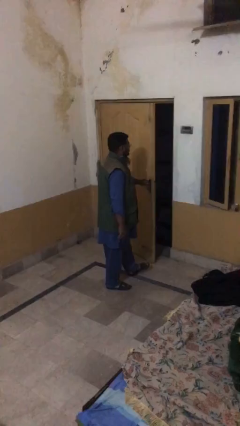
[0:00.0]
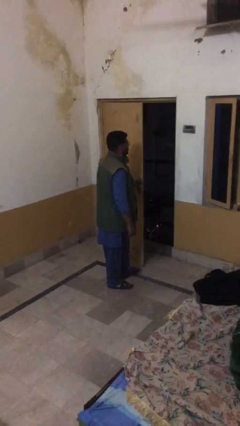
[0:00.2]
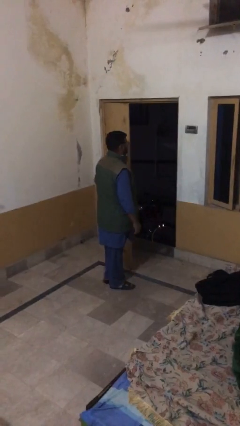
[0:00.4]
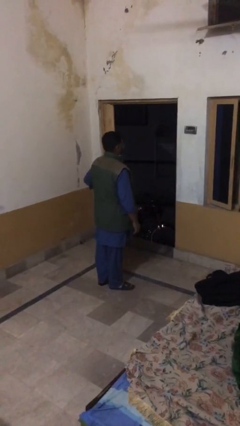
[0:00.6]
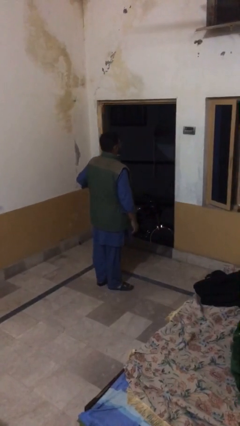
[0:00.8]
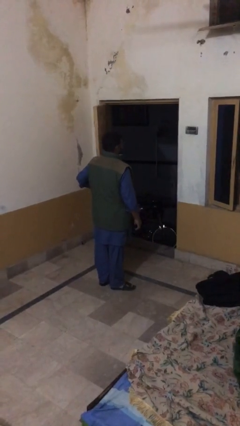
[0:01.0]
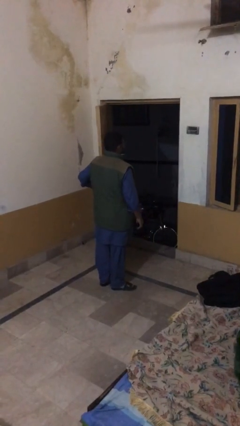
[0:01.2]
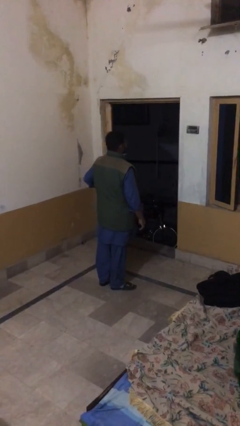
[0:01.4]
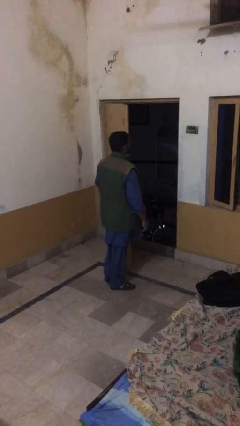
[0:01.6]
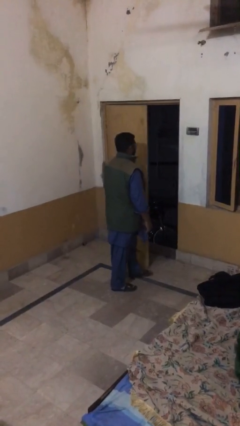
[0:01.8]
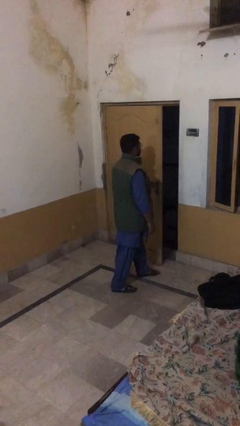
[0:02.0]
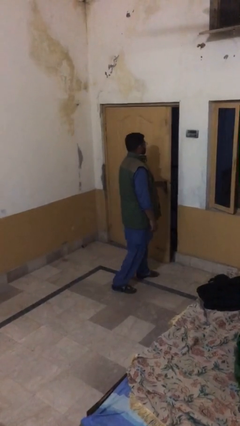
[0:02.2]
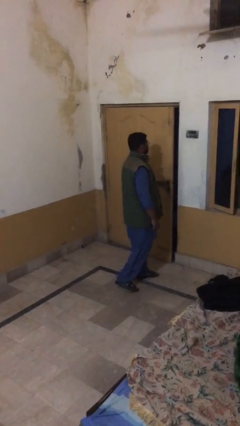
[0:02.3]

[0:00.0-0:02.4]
person closes facility door

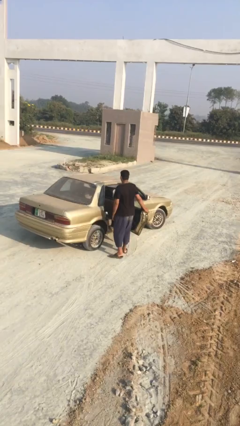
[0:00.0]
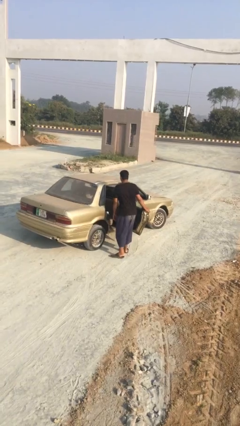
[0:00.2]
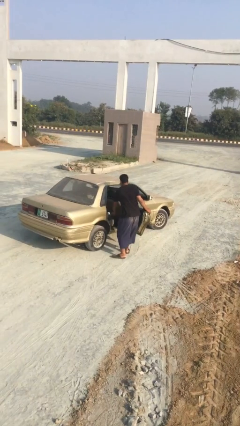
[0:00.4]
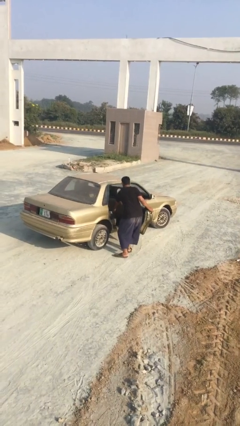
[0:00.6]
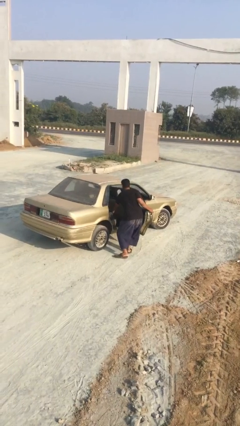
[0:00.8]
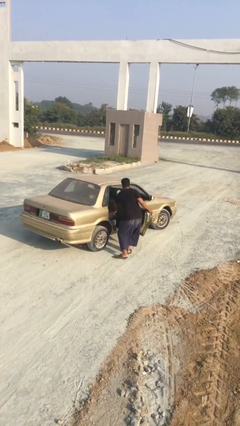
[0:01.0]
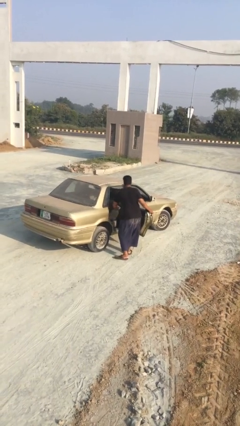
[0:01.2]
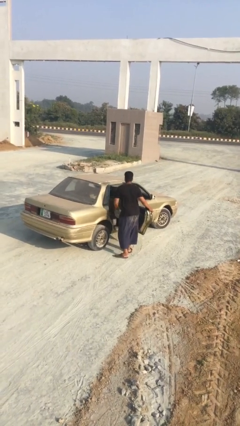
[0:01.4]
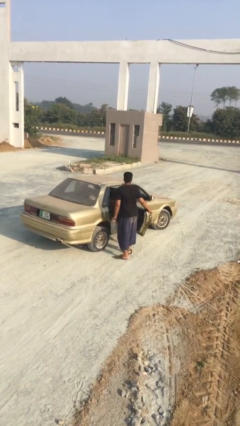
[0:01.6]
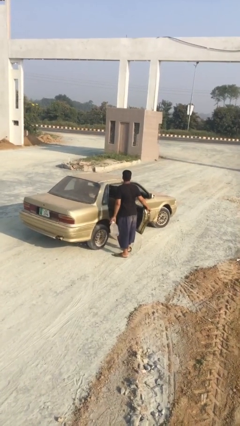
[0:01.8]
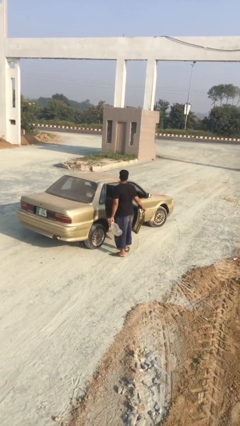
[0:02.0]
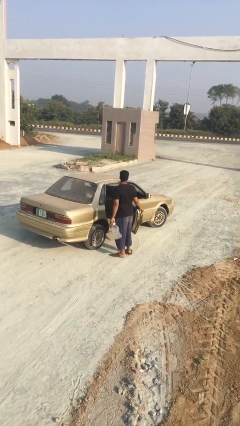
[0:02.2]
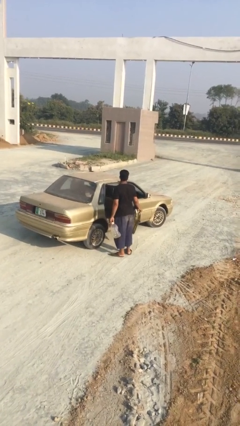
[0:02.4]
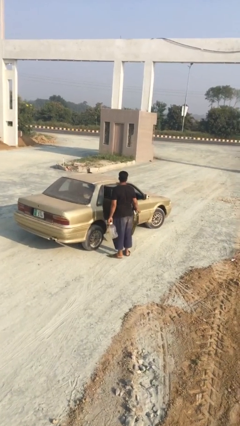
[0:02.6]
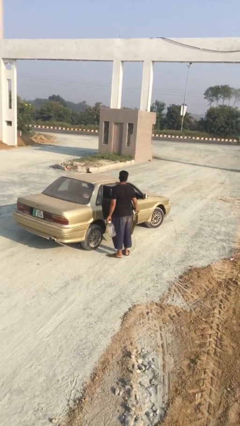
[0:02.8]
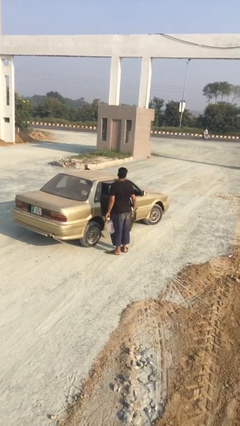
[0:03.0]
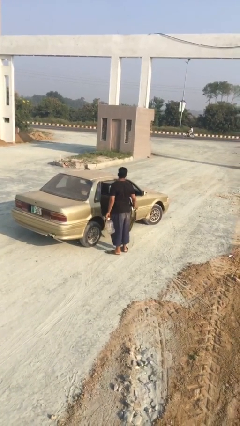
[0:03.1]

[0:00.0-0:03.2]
person unloads car

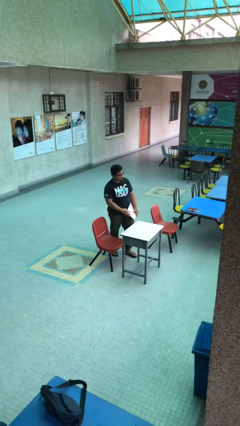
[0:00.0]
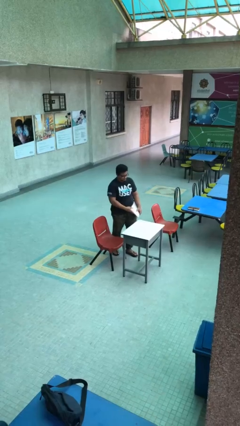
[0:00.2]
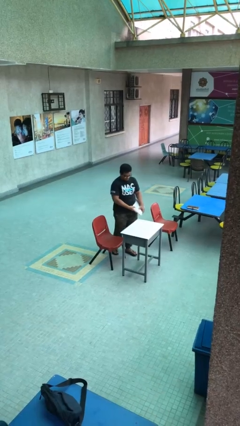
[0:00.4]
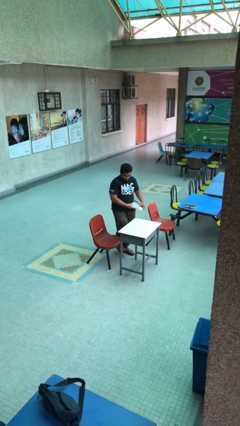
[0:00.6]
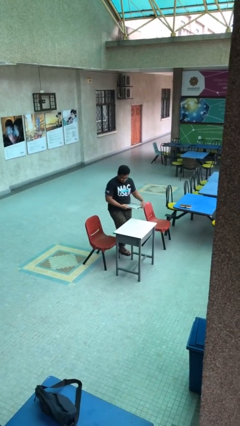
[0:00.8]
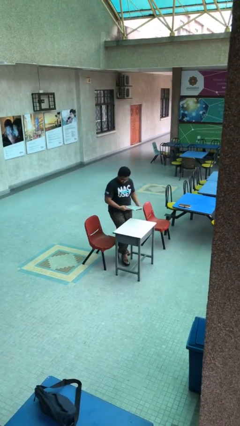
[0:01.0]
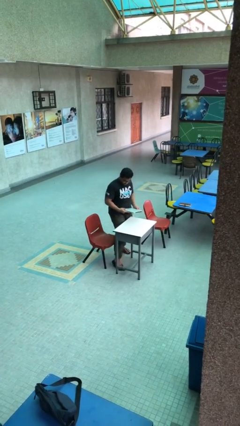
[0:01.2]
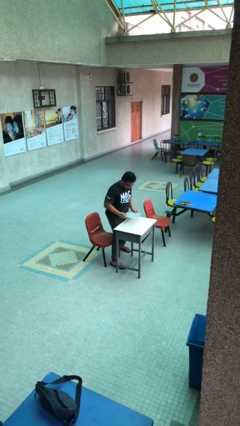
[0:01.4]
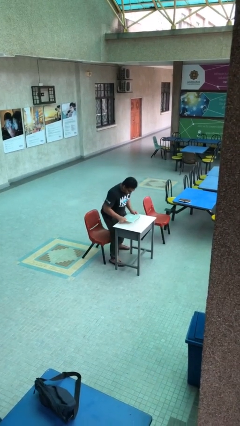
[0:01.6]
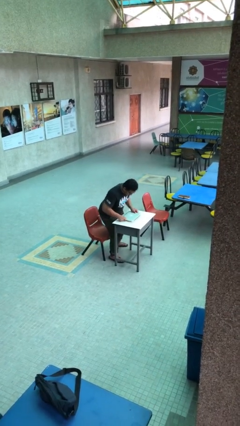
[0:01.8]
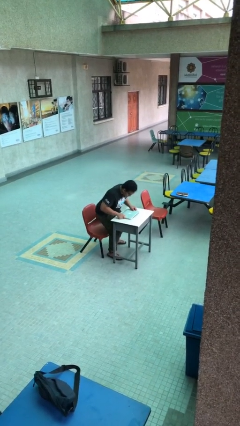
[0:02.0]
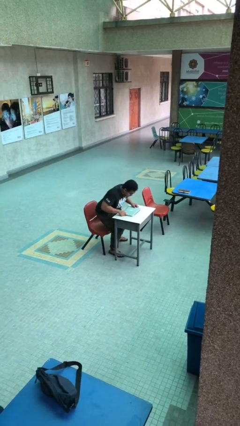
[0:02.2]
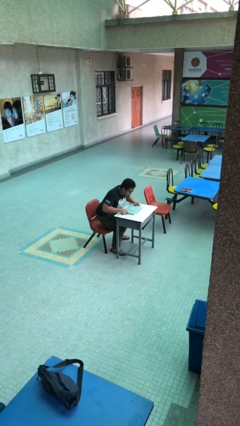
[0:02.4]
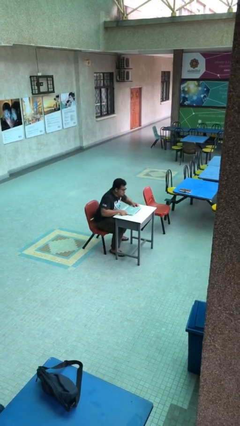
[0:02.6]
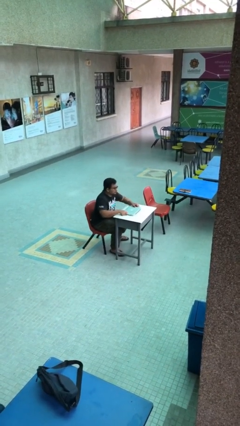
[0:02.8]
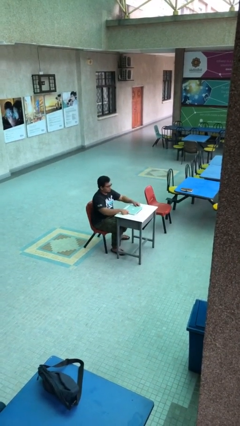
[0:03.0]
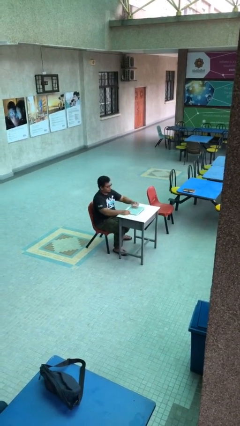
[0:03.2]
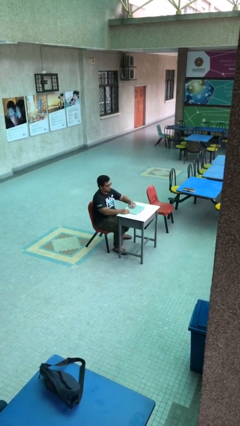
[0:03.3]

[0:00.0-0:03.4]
person sits down

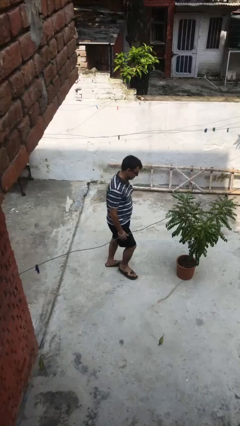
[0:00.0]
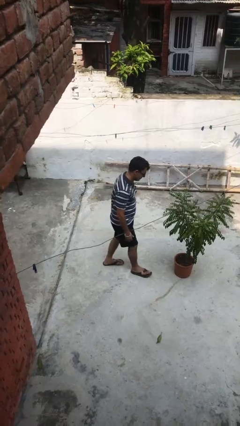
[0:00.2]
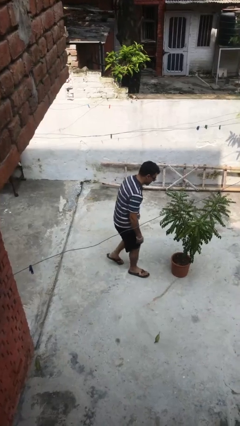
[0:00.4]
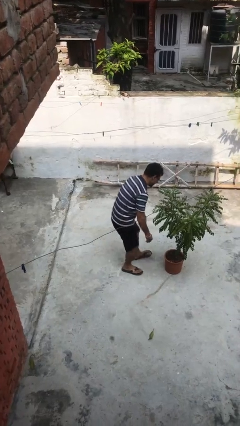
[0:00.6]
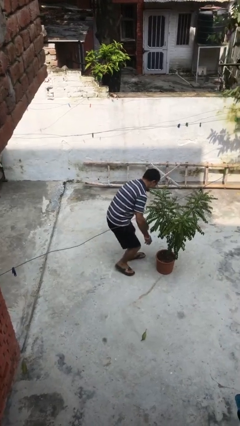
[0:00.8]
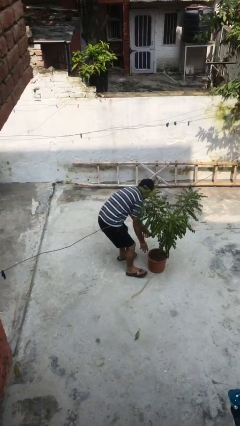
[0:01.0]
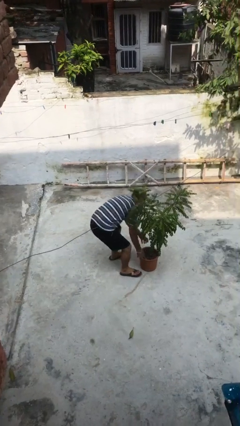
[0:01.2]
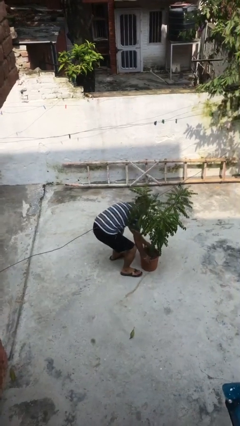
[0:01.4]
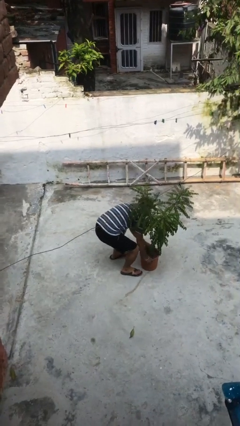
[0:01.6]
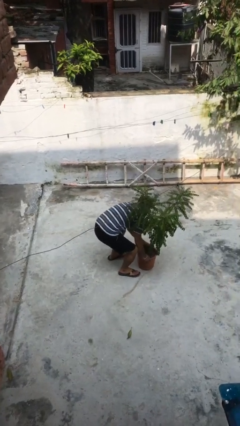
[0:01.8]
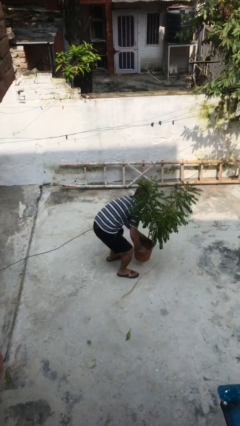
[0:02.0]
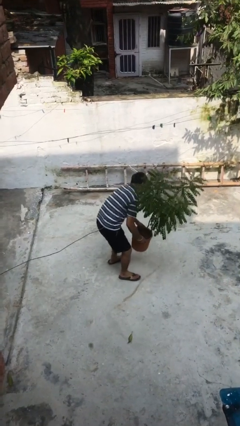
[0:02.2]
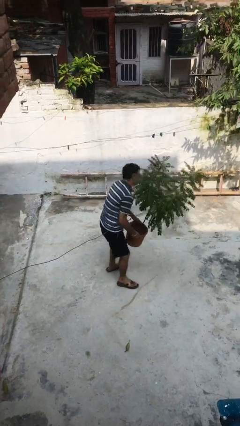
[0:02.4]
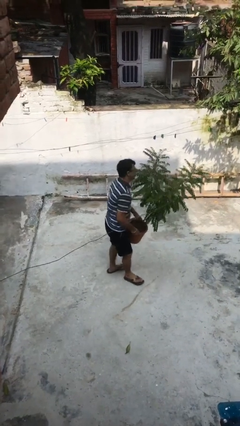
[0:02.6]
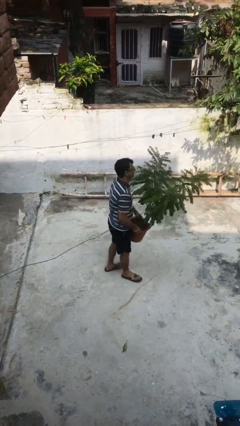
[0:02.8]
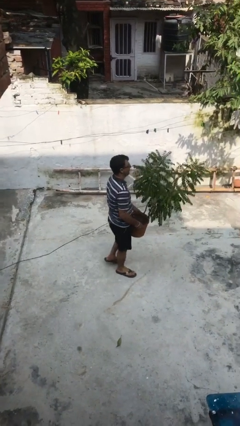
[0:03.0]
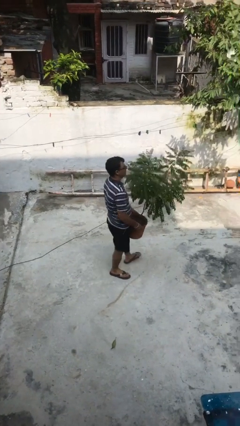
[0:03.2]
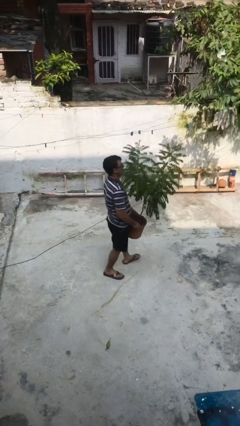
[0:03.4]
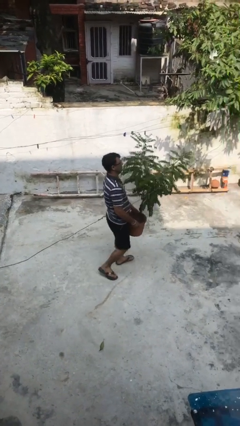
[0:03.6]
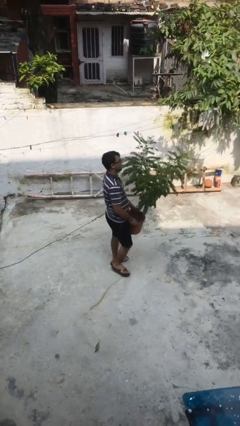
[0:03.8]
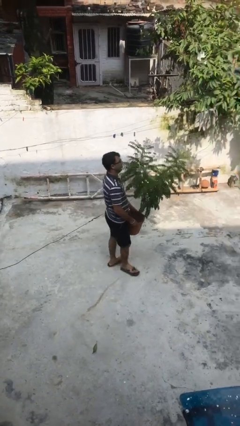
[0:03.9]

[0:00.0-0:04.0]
person picks up object from floor

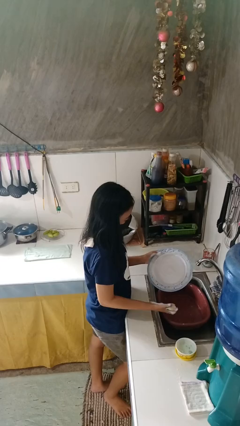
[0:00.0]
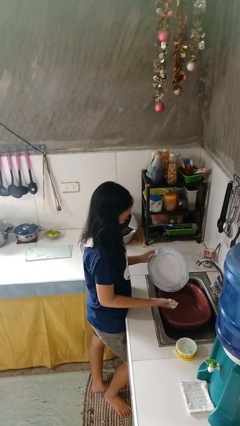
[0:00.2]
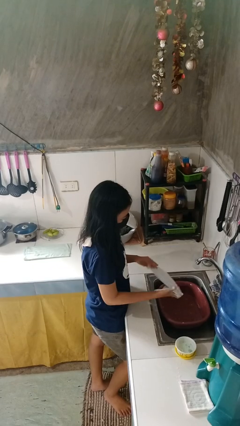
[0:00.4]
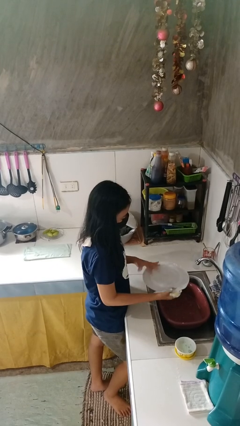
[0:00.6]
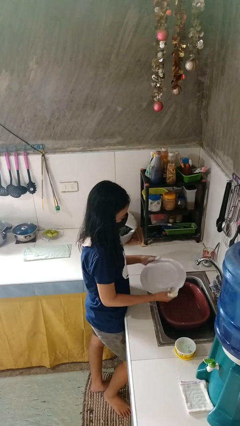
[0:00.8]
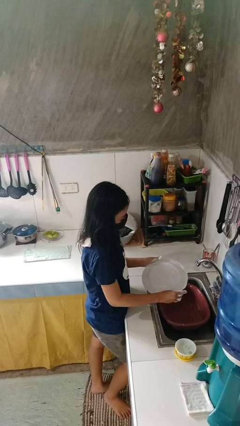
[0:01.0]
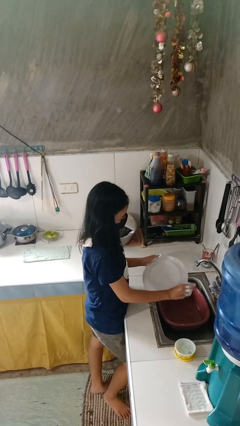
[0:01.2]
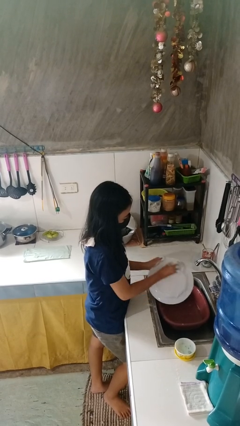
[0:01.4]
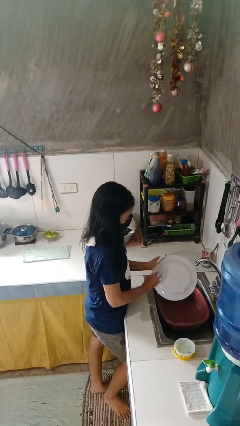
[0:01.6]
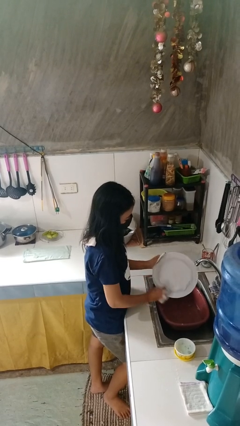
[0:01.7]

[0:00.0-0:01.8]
person washes dish

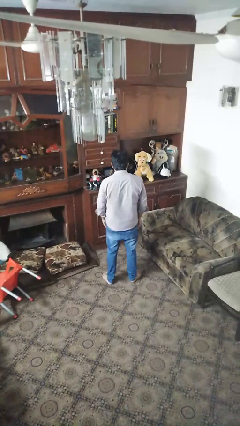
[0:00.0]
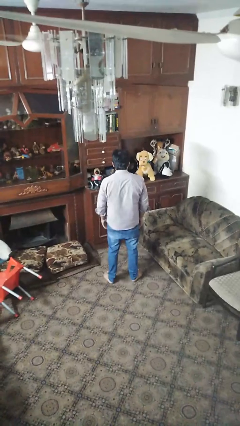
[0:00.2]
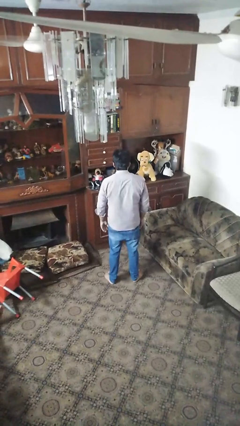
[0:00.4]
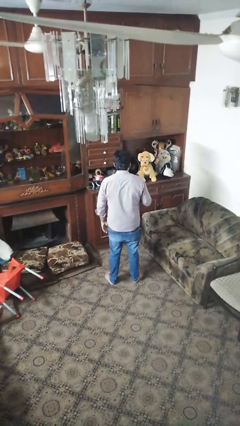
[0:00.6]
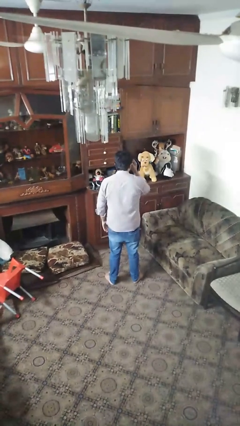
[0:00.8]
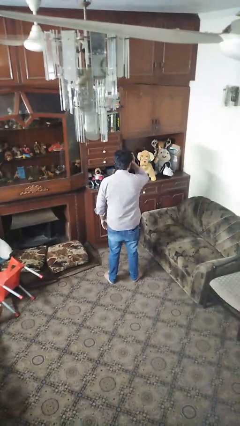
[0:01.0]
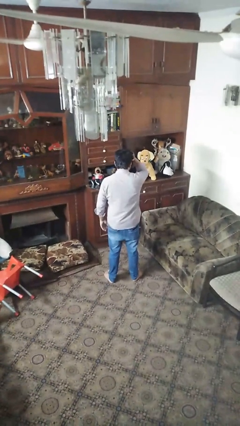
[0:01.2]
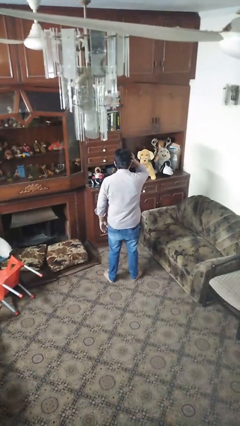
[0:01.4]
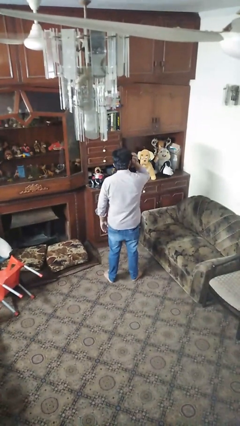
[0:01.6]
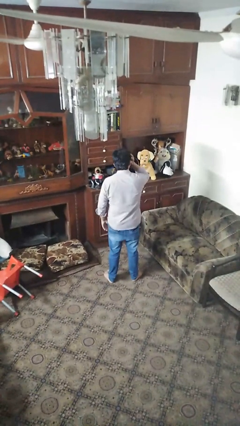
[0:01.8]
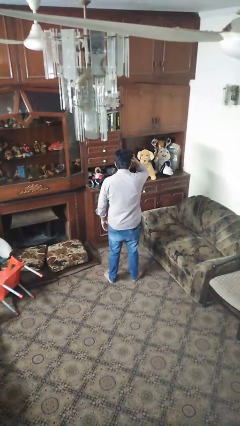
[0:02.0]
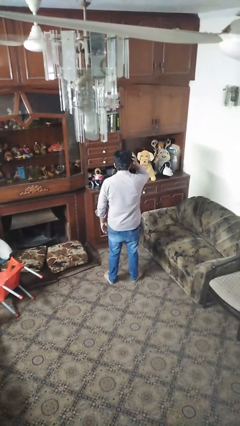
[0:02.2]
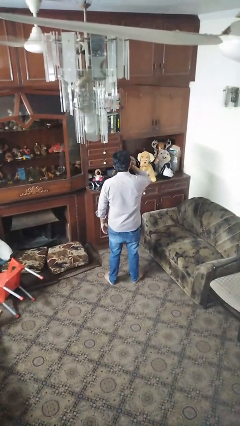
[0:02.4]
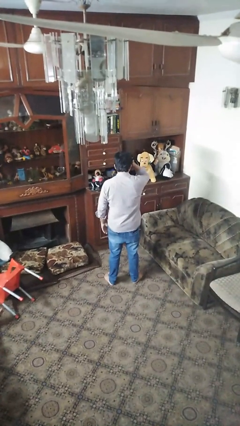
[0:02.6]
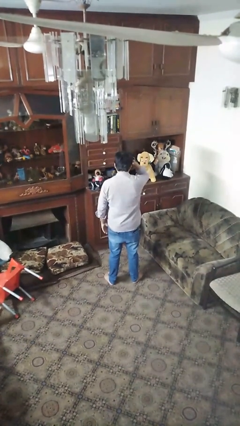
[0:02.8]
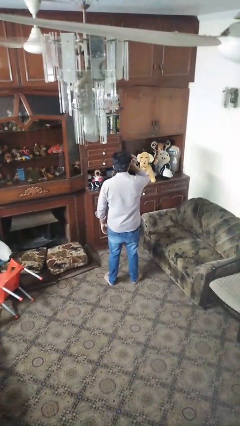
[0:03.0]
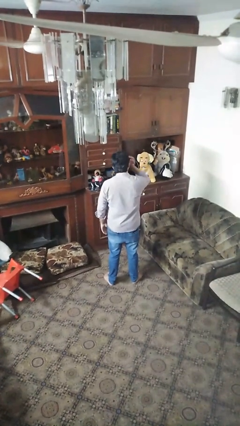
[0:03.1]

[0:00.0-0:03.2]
person strokes hair
